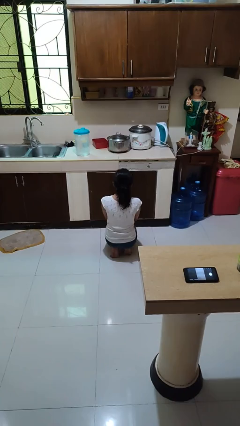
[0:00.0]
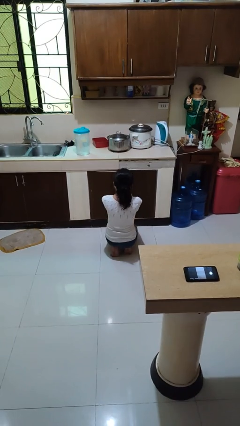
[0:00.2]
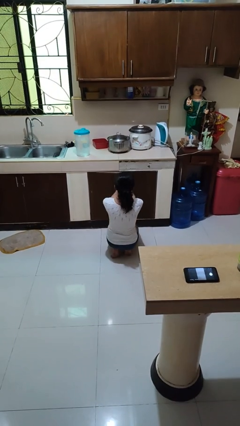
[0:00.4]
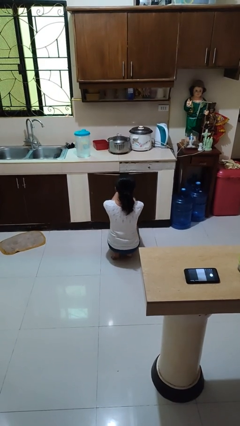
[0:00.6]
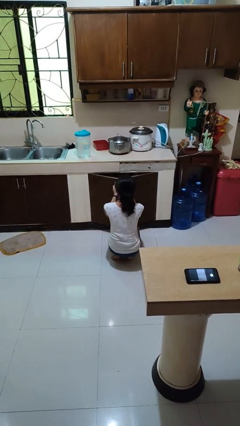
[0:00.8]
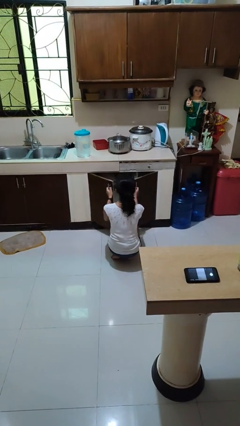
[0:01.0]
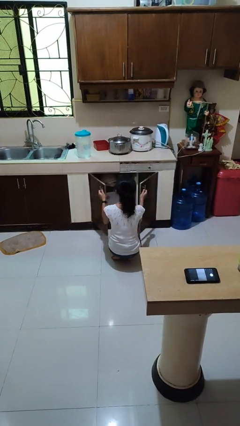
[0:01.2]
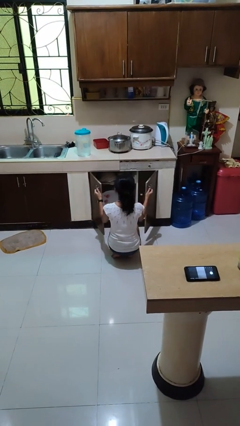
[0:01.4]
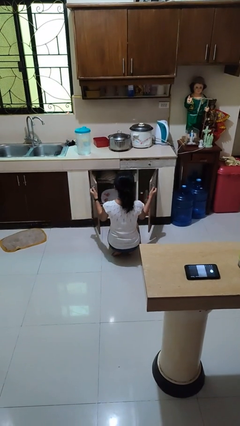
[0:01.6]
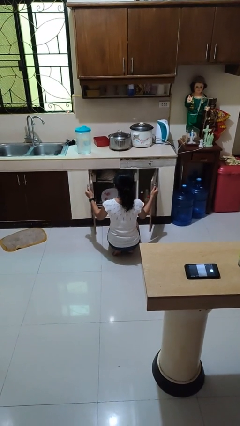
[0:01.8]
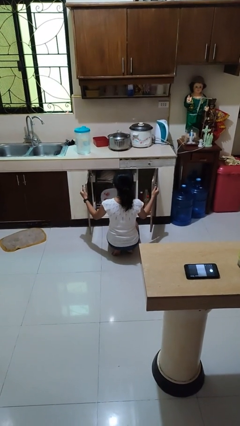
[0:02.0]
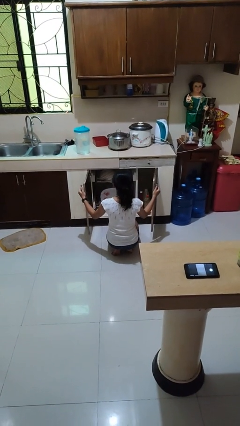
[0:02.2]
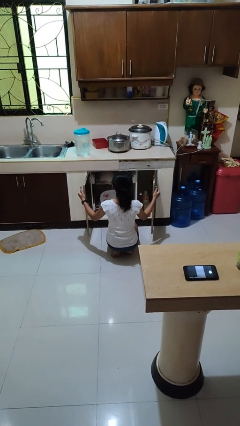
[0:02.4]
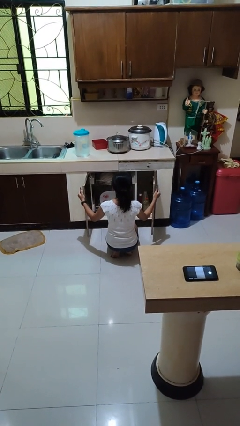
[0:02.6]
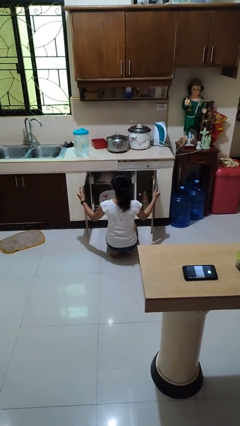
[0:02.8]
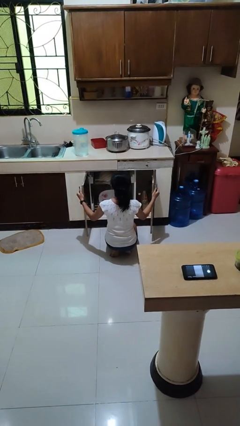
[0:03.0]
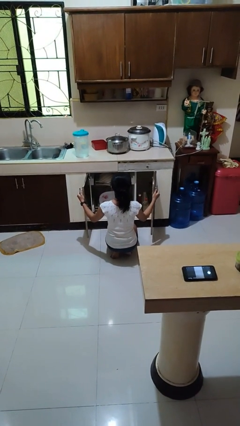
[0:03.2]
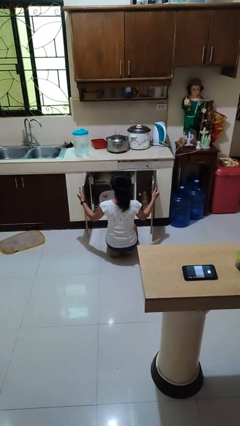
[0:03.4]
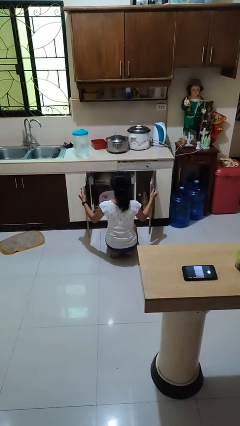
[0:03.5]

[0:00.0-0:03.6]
person opens dishwasher

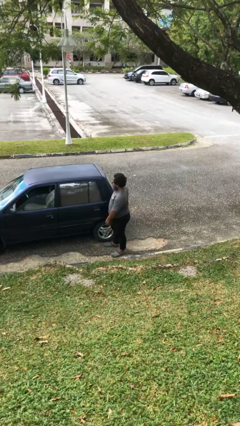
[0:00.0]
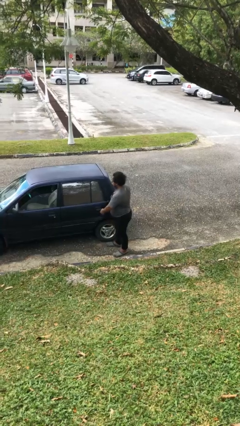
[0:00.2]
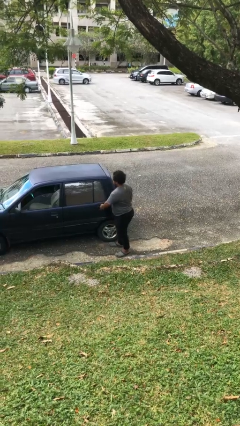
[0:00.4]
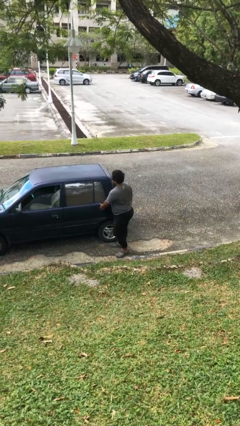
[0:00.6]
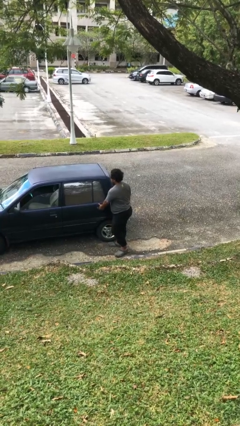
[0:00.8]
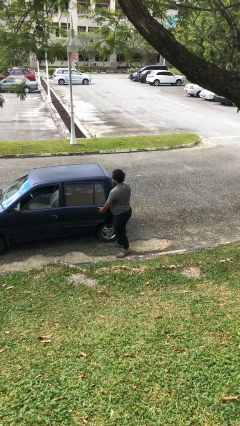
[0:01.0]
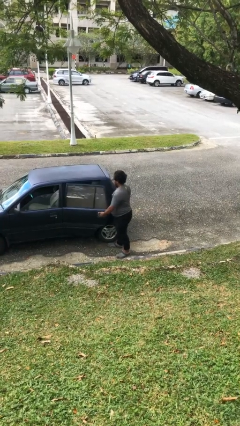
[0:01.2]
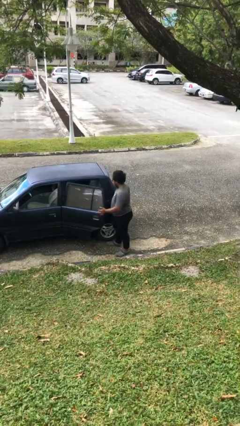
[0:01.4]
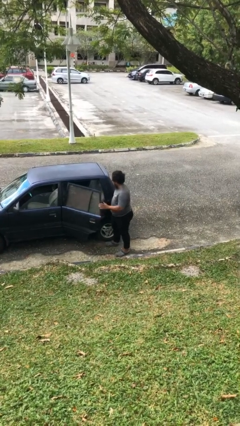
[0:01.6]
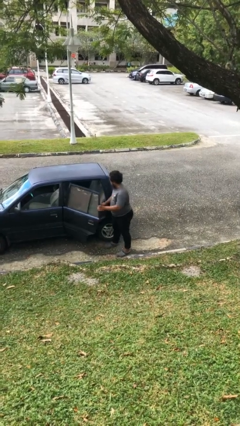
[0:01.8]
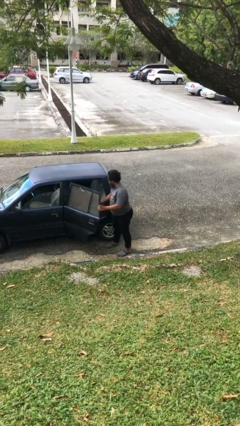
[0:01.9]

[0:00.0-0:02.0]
person opens car door

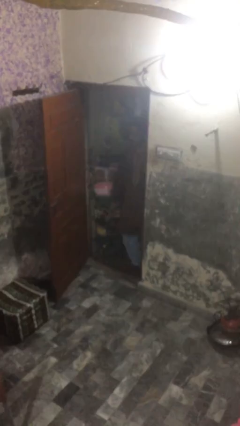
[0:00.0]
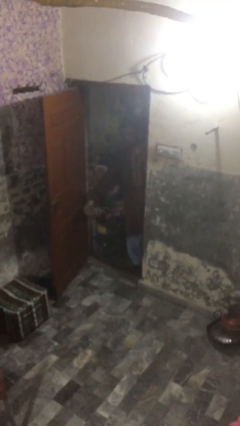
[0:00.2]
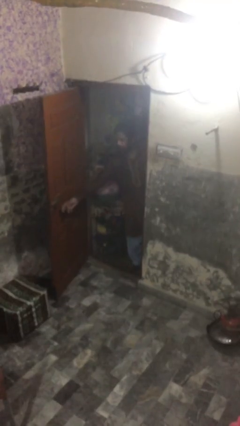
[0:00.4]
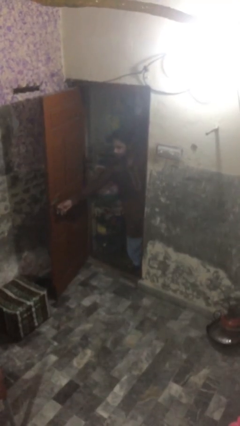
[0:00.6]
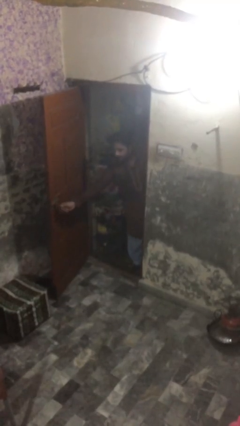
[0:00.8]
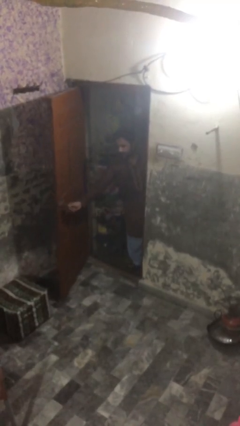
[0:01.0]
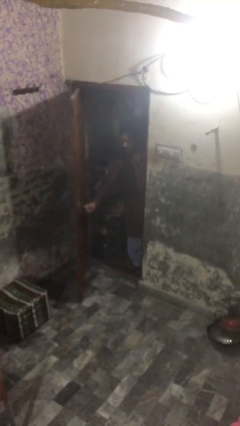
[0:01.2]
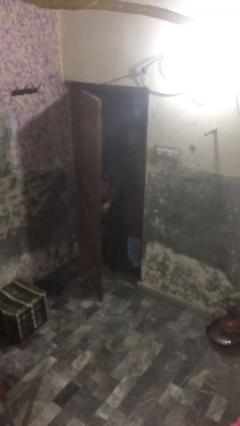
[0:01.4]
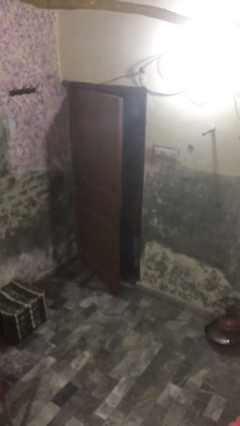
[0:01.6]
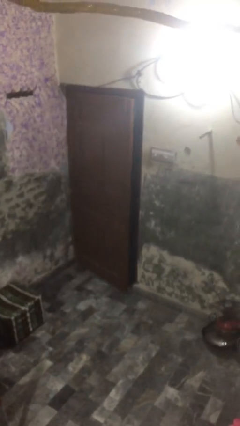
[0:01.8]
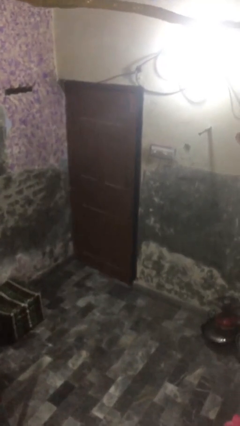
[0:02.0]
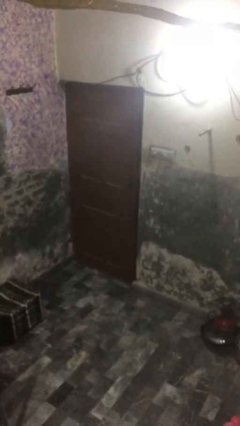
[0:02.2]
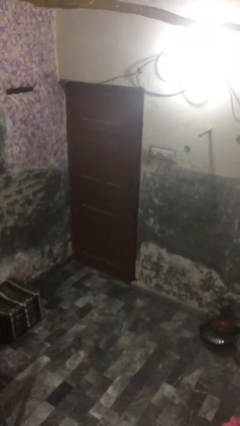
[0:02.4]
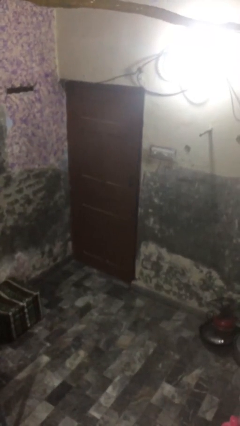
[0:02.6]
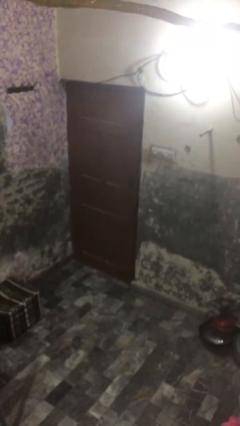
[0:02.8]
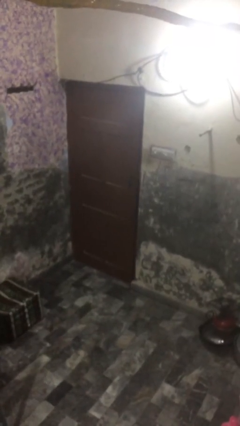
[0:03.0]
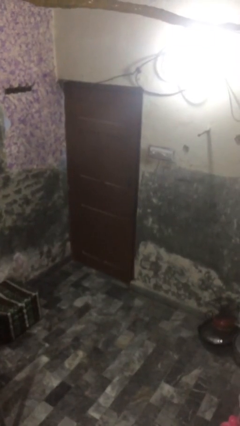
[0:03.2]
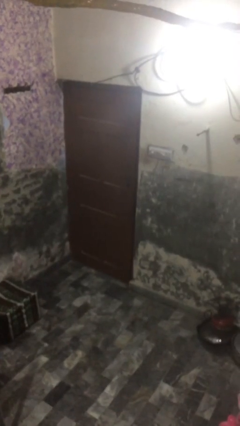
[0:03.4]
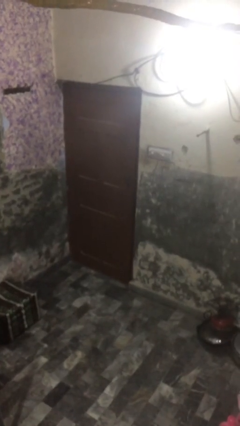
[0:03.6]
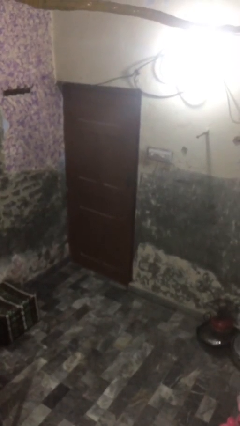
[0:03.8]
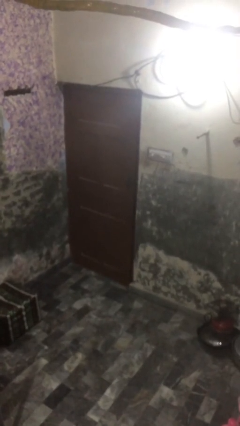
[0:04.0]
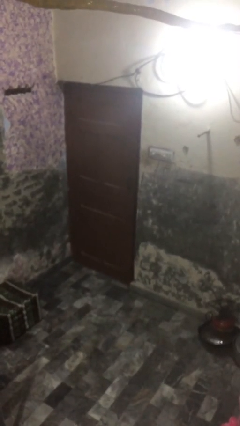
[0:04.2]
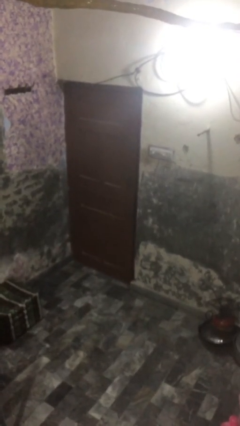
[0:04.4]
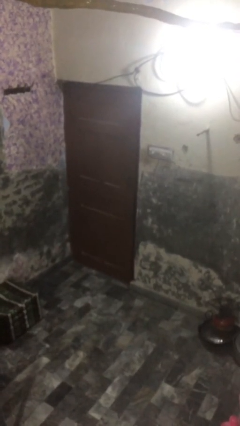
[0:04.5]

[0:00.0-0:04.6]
person closes facility door

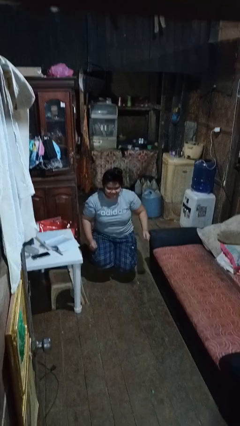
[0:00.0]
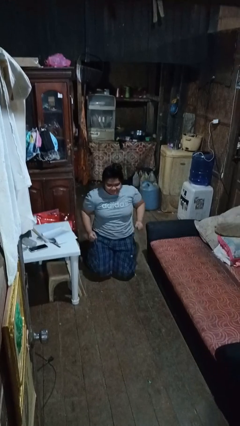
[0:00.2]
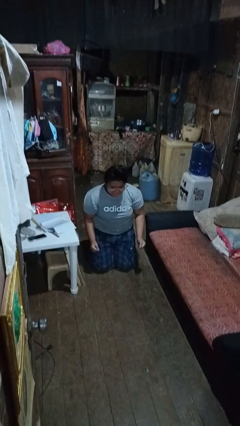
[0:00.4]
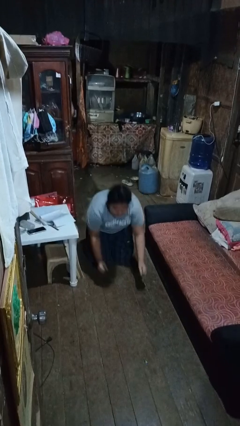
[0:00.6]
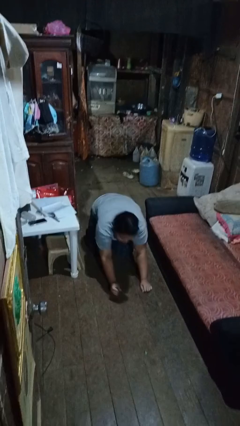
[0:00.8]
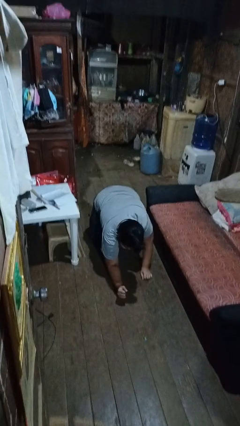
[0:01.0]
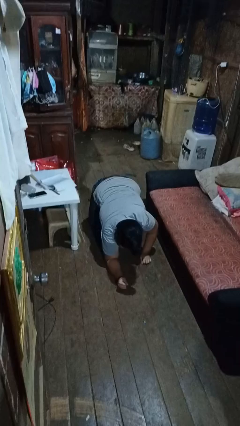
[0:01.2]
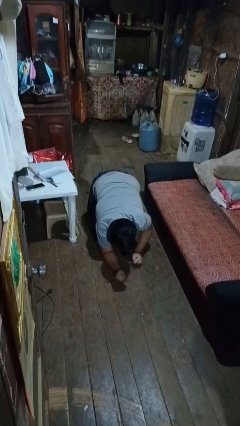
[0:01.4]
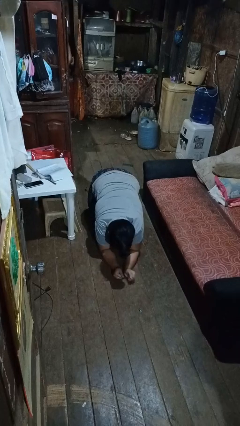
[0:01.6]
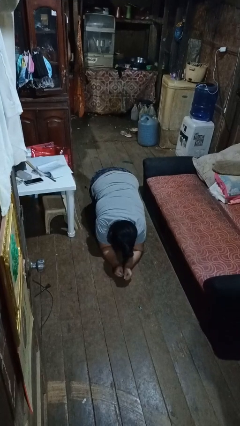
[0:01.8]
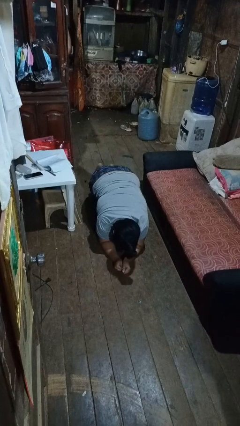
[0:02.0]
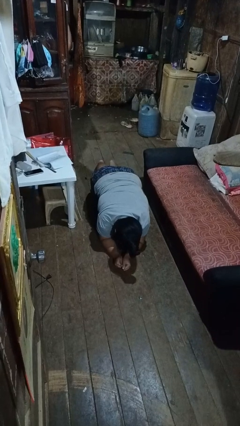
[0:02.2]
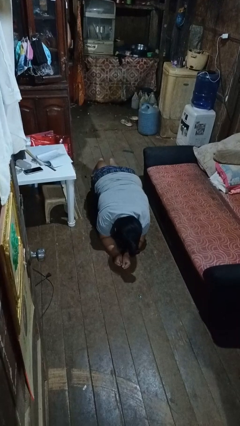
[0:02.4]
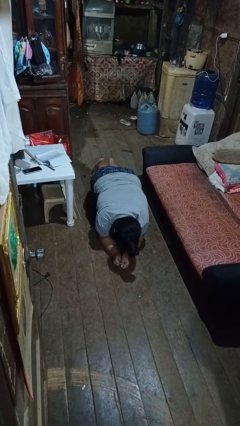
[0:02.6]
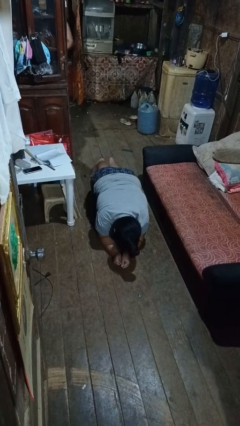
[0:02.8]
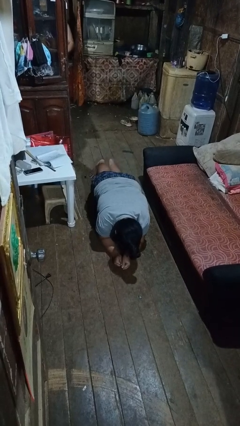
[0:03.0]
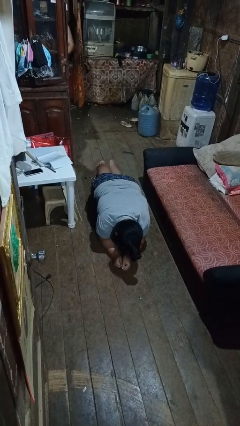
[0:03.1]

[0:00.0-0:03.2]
person exercises with plank

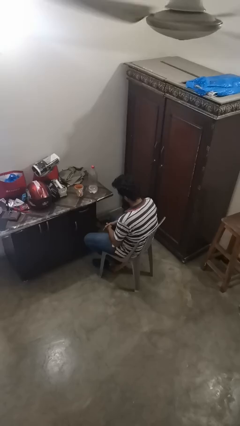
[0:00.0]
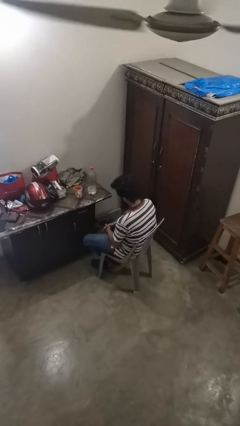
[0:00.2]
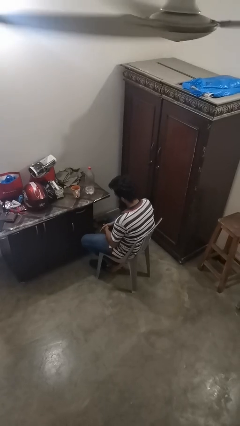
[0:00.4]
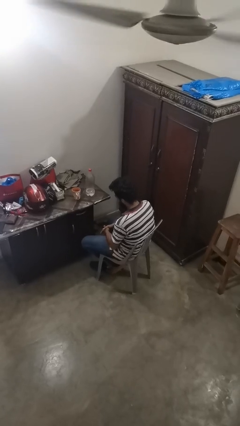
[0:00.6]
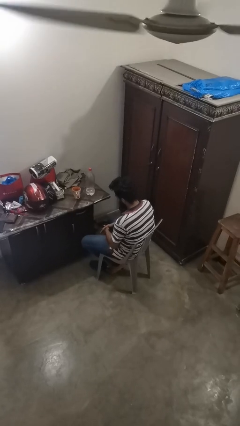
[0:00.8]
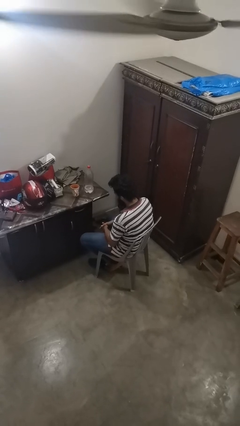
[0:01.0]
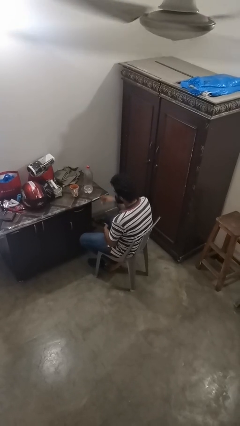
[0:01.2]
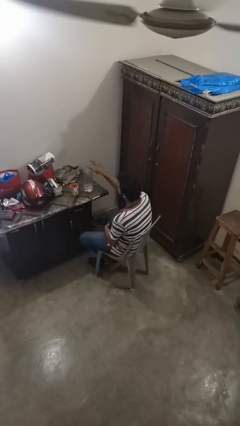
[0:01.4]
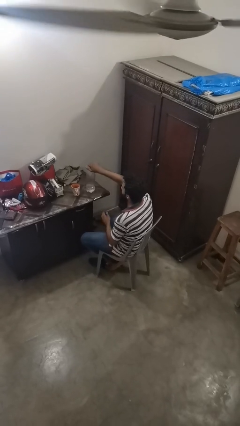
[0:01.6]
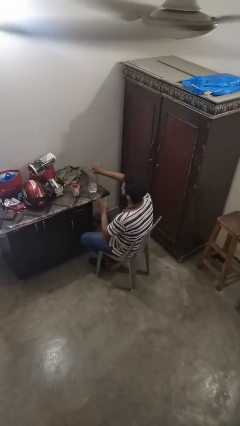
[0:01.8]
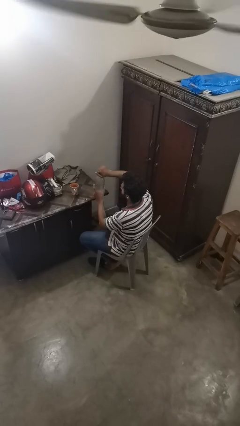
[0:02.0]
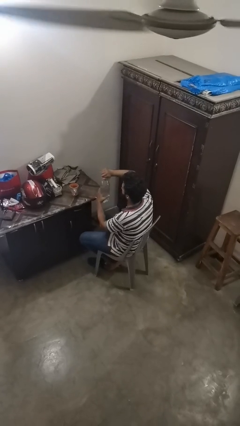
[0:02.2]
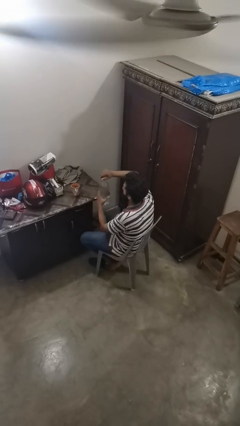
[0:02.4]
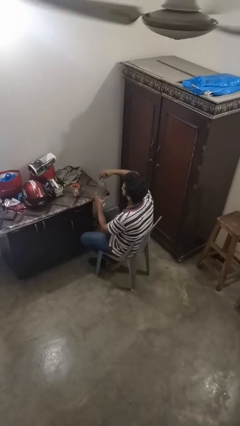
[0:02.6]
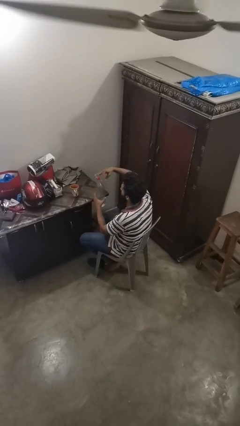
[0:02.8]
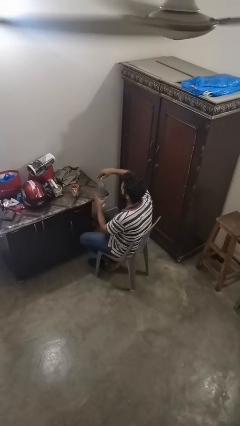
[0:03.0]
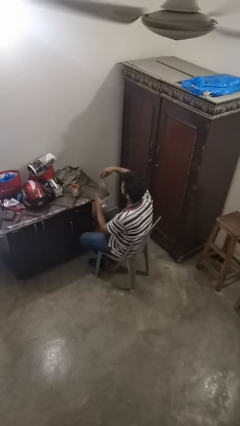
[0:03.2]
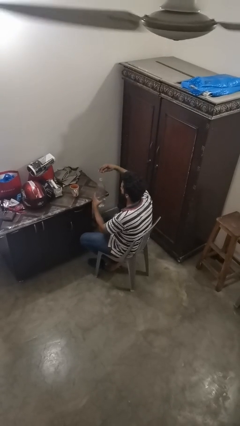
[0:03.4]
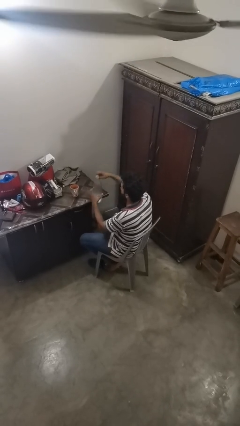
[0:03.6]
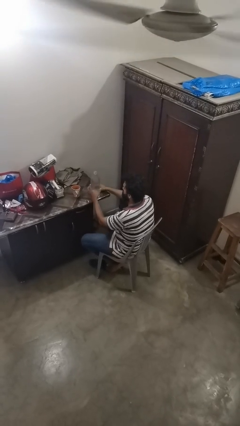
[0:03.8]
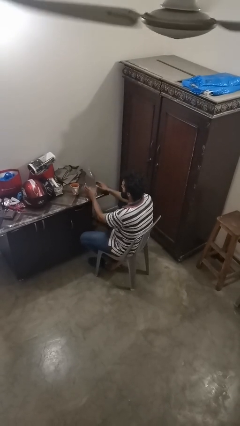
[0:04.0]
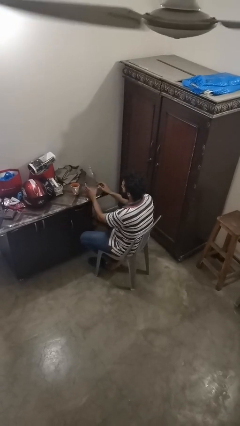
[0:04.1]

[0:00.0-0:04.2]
person unscrews lid from bottle

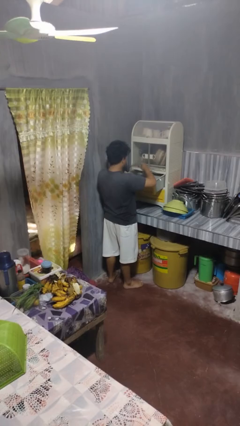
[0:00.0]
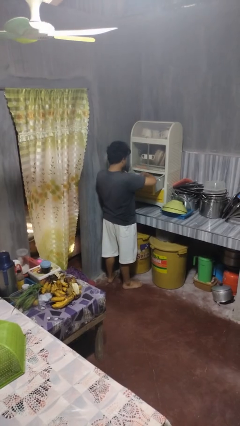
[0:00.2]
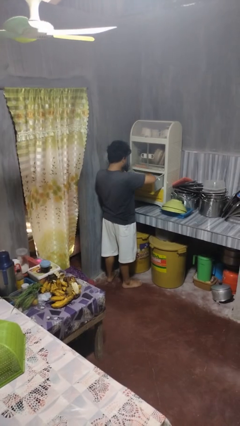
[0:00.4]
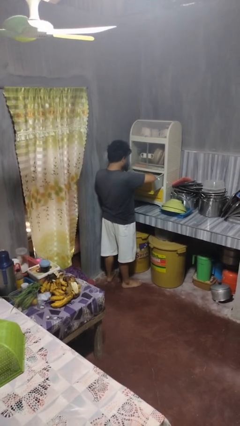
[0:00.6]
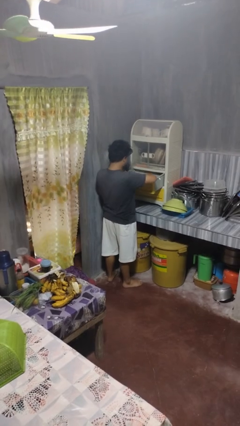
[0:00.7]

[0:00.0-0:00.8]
person puts object into kitchen drawer
